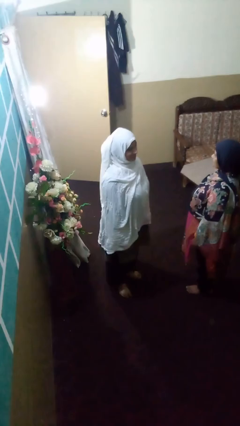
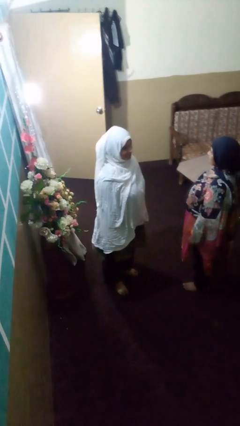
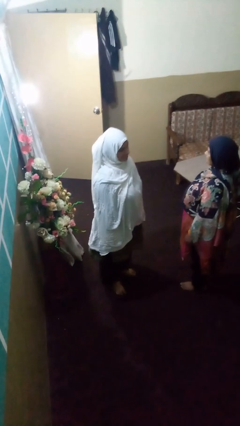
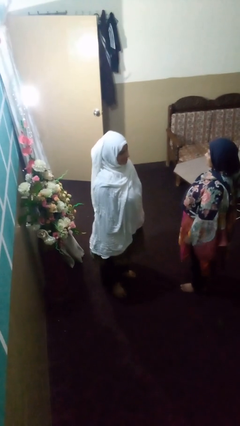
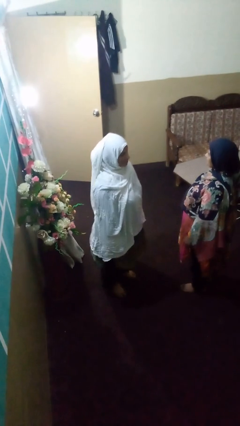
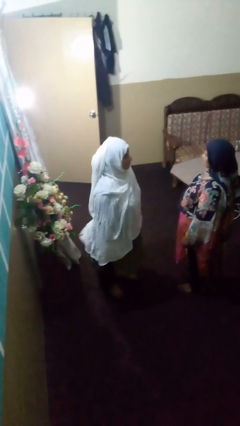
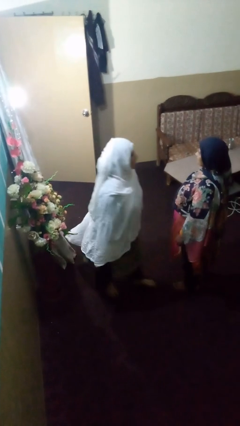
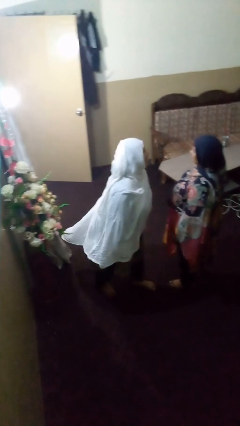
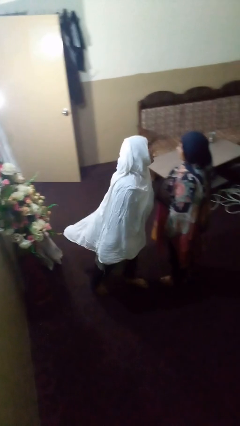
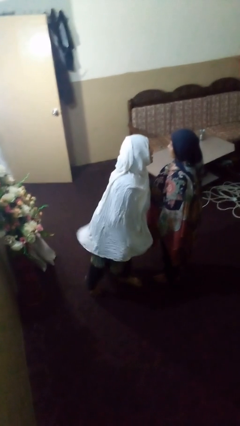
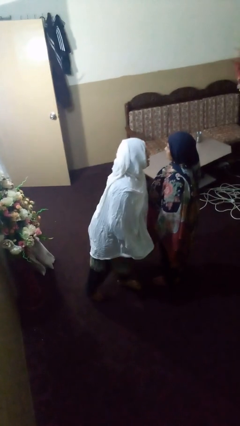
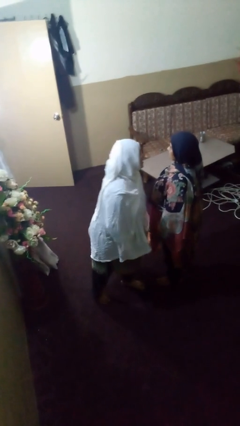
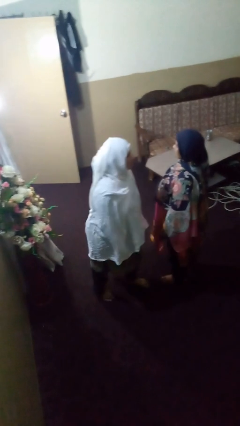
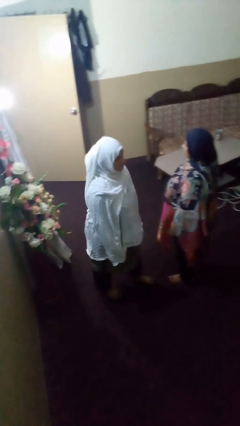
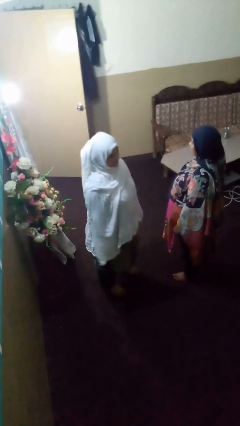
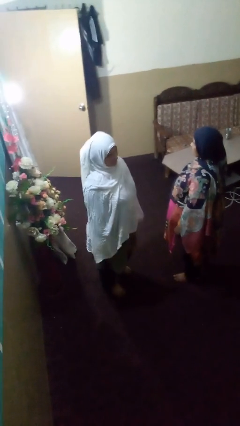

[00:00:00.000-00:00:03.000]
person laughs with person

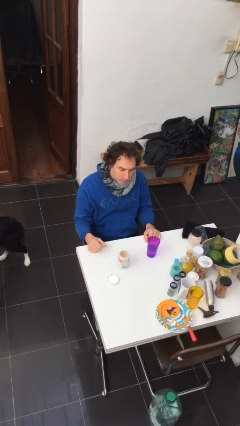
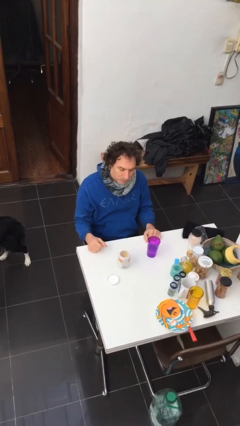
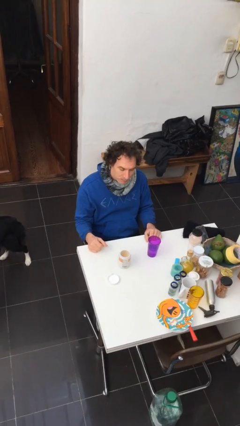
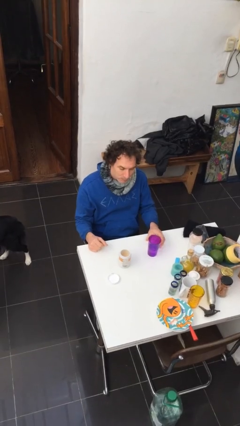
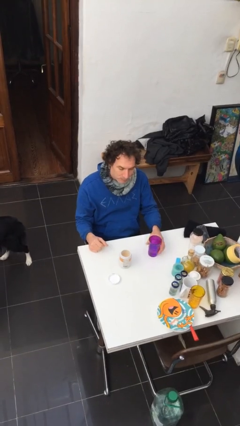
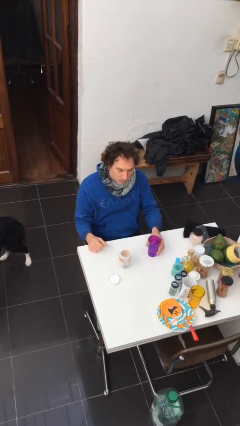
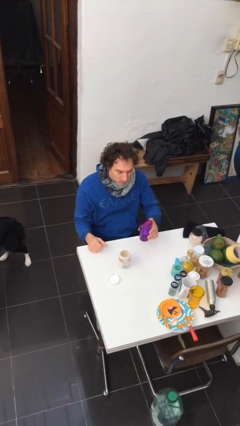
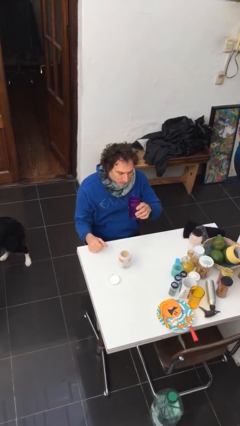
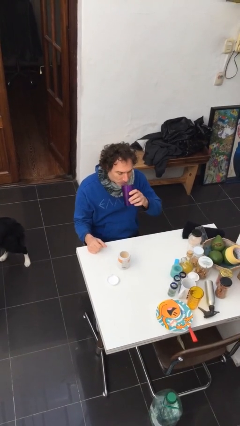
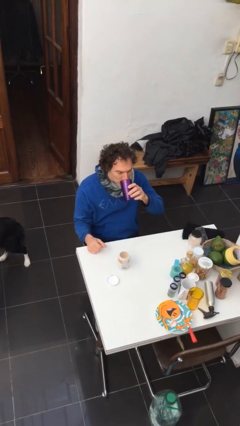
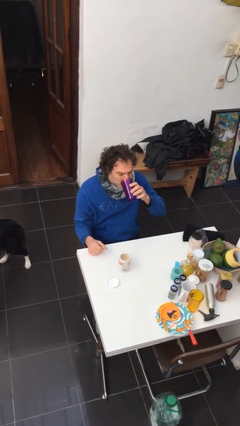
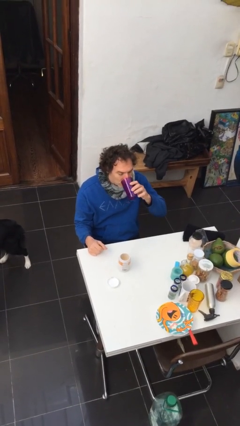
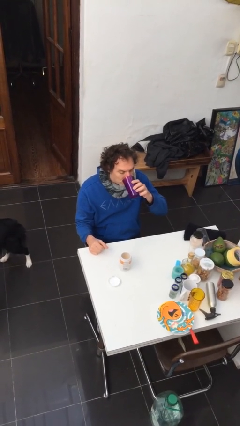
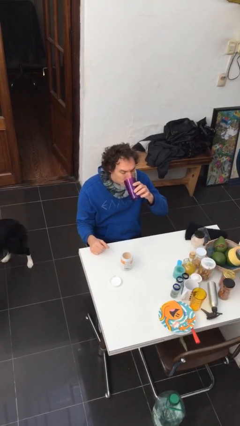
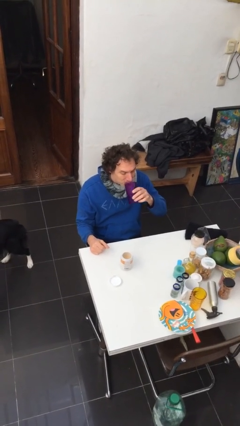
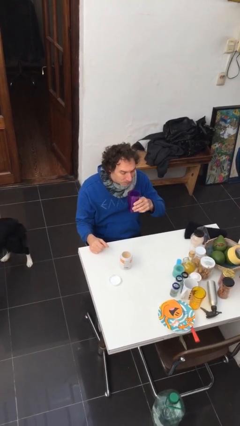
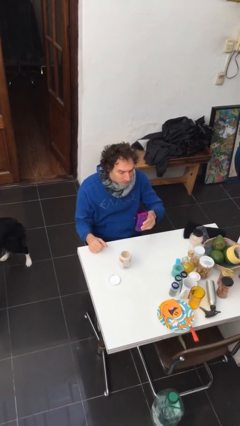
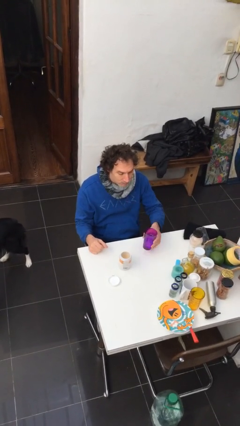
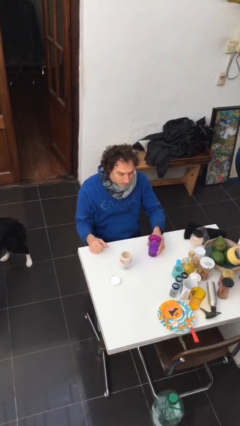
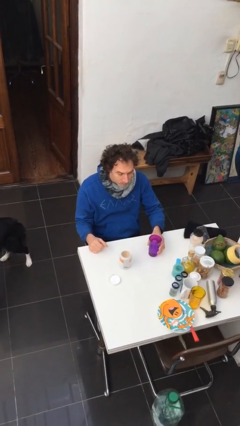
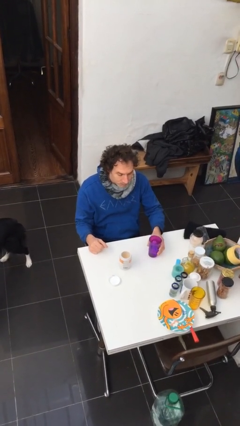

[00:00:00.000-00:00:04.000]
person drinks from cup

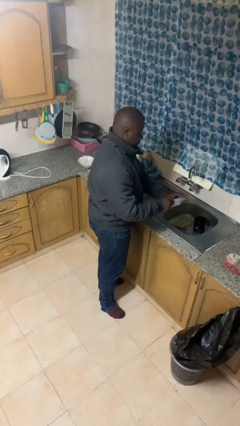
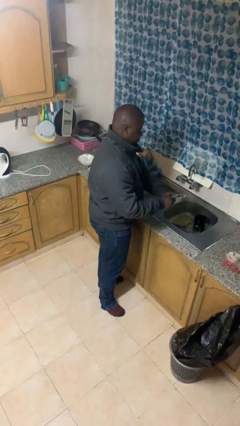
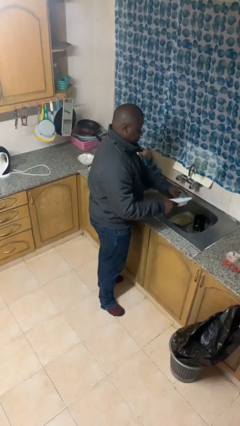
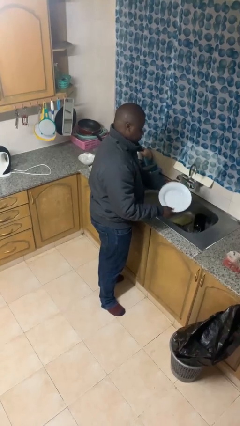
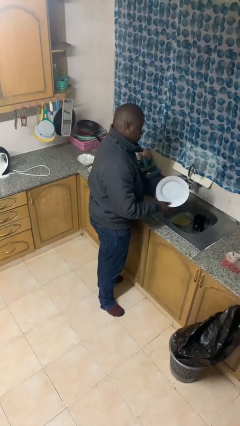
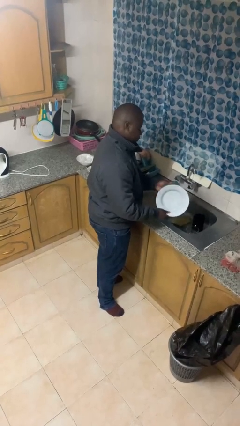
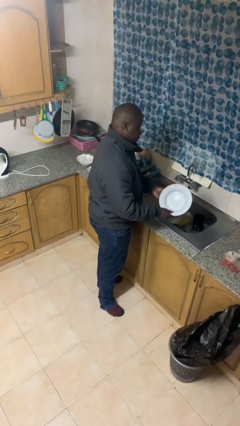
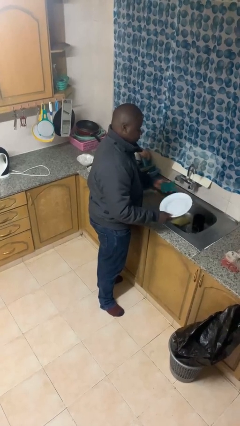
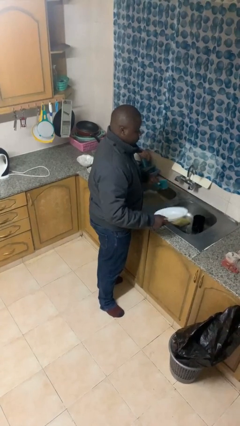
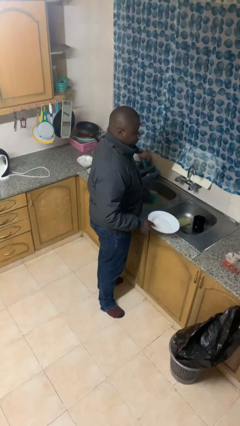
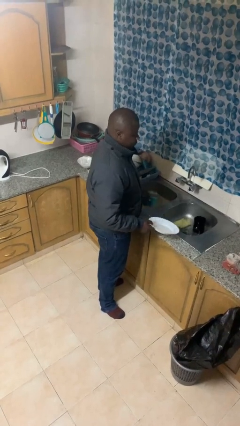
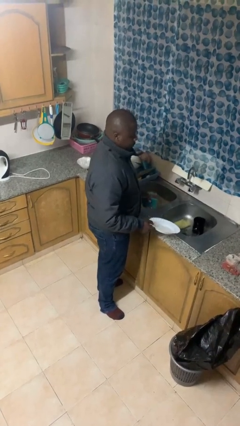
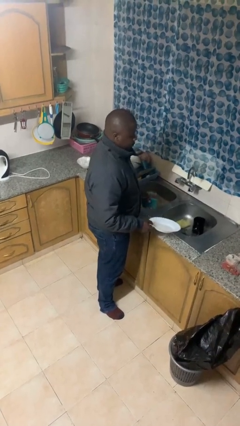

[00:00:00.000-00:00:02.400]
person washes dish

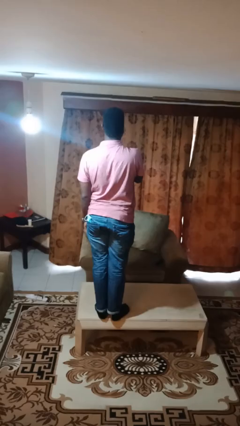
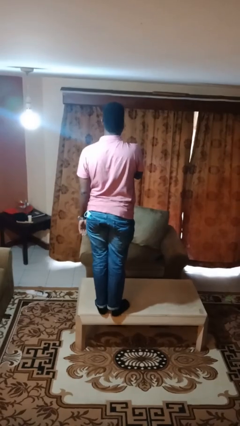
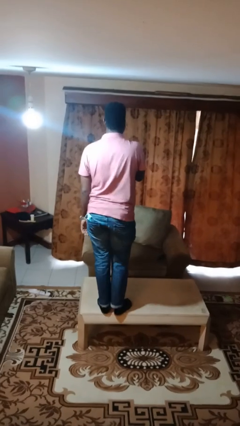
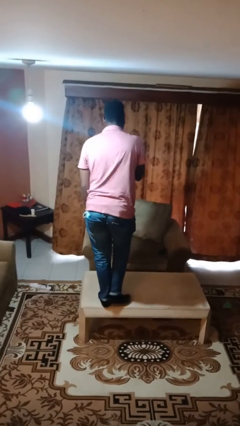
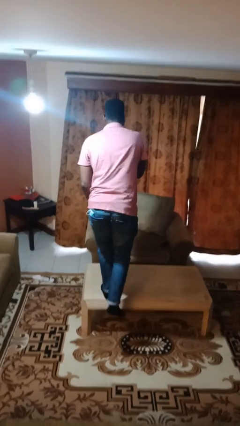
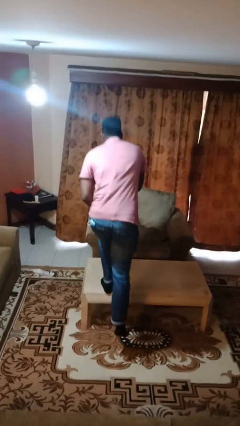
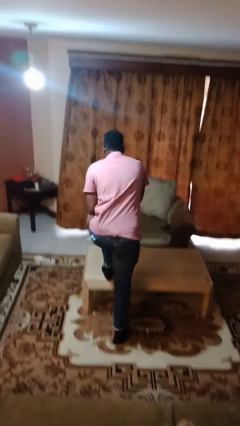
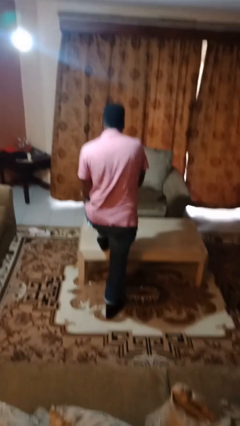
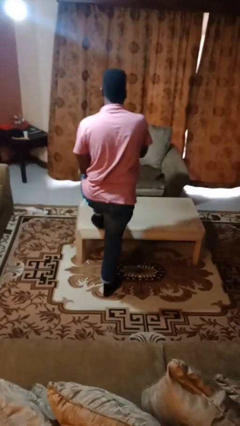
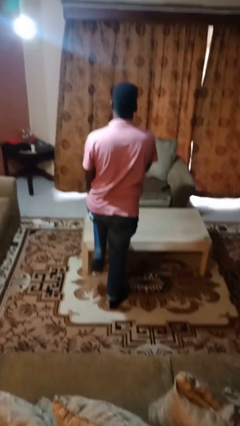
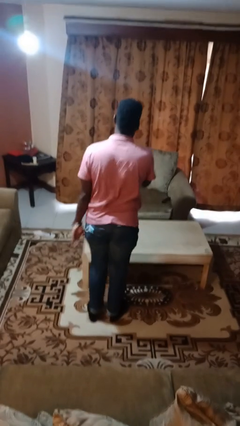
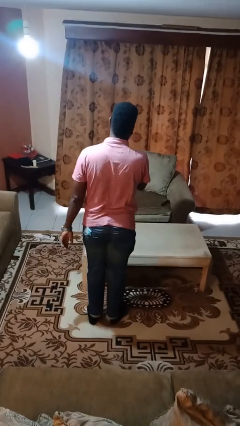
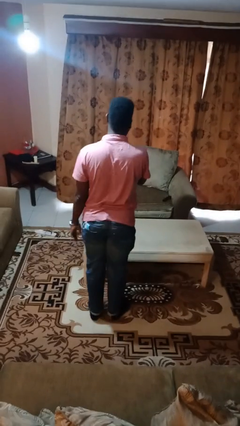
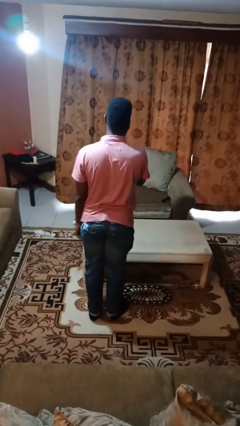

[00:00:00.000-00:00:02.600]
person climbs off table

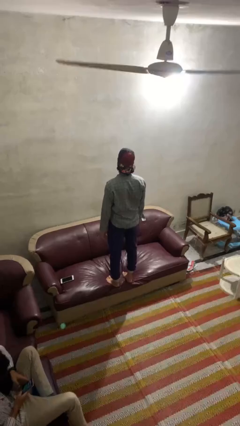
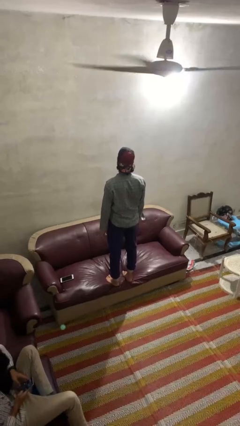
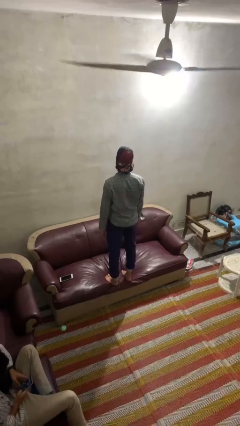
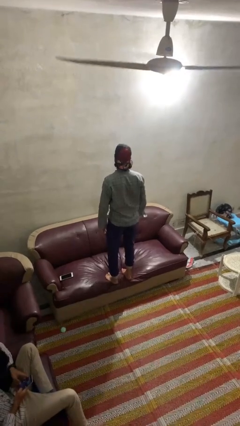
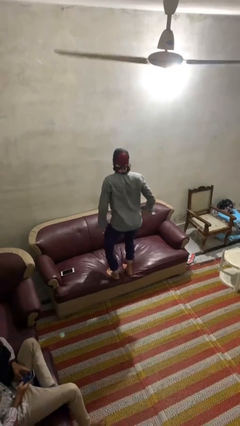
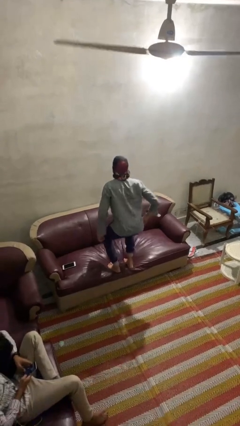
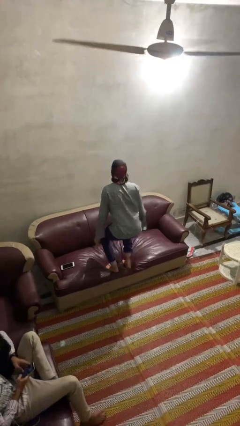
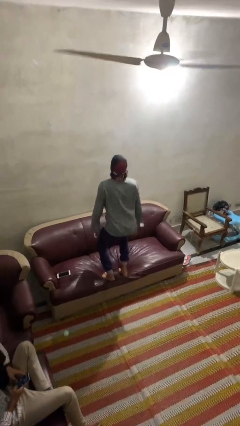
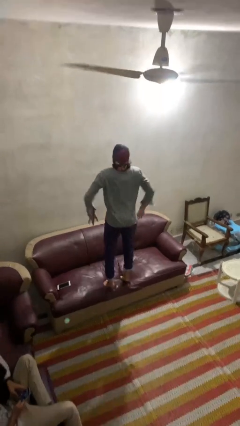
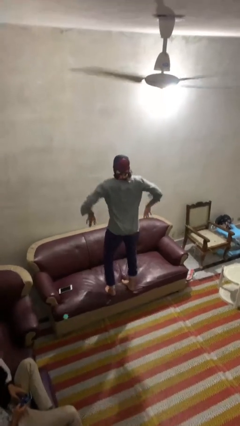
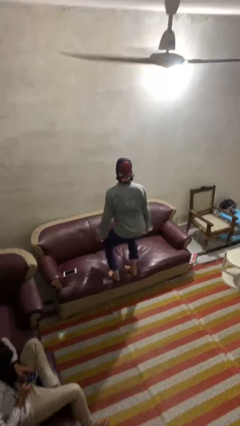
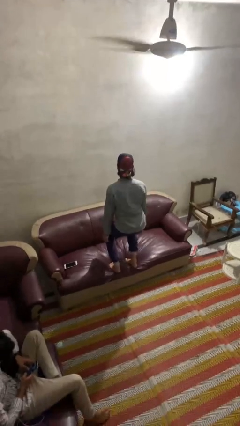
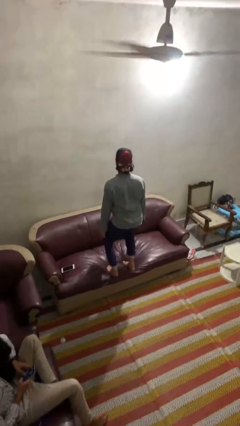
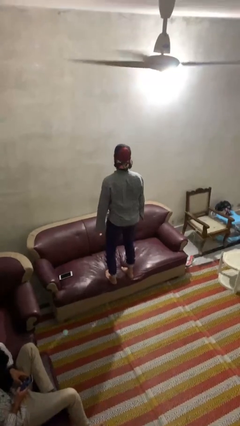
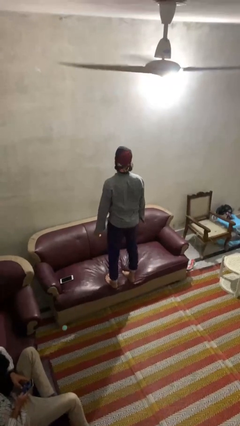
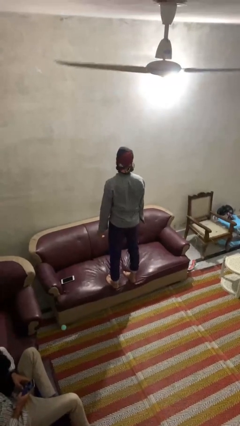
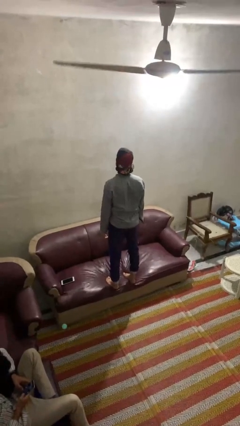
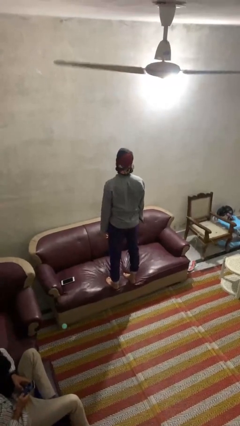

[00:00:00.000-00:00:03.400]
person jumps on couch

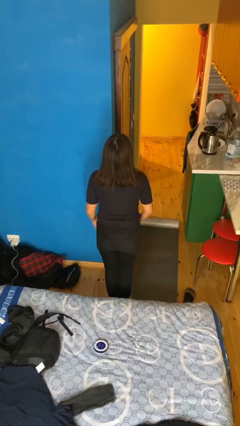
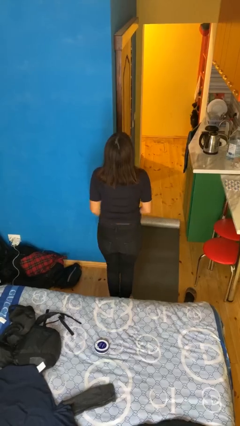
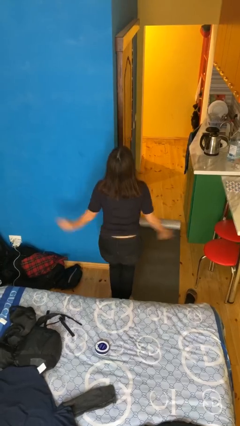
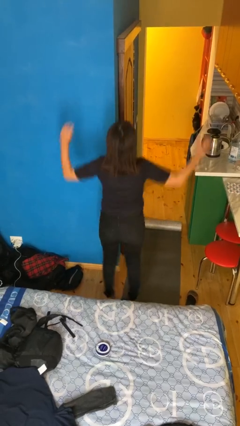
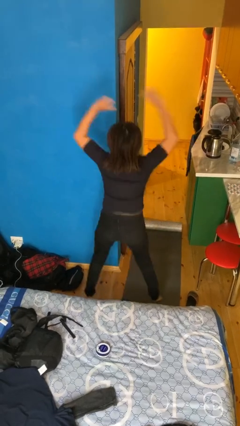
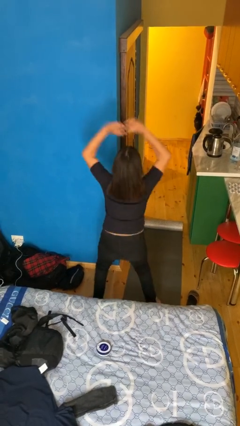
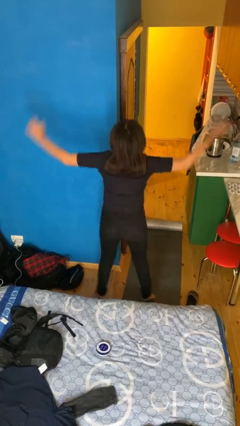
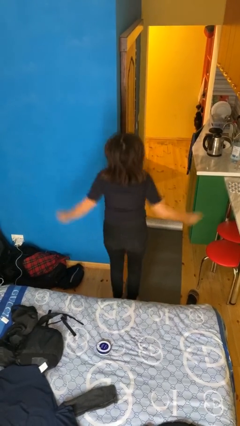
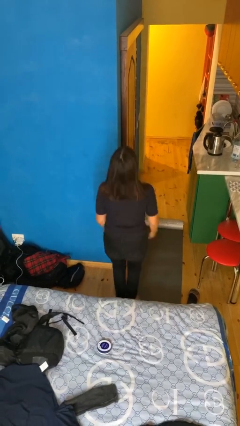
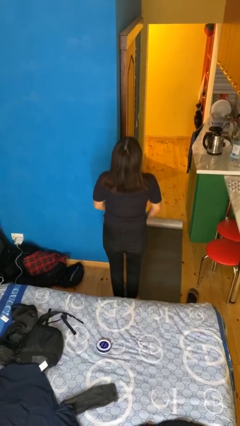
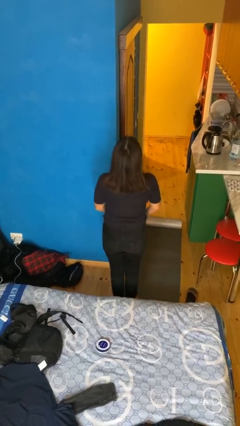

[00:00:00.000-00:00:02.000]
person exercises with jumping jacks

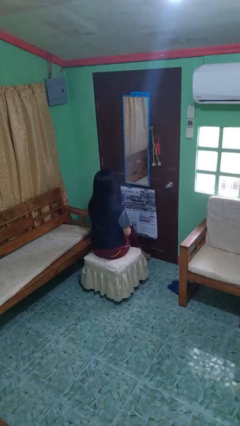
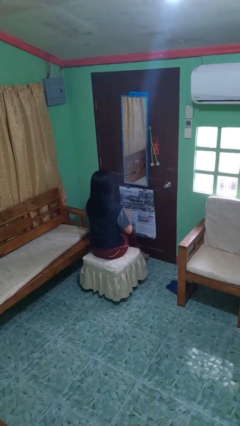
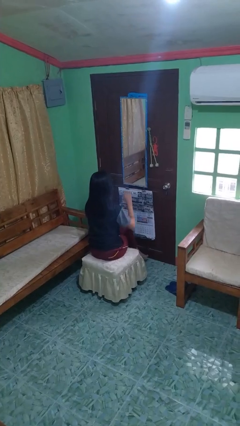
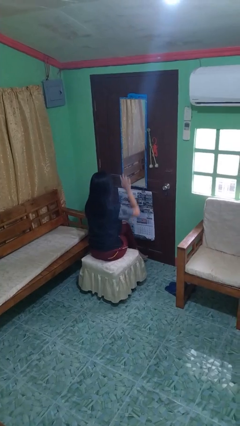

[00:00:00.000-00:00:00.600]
person gestures raise hand
